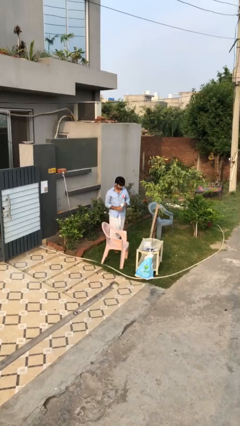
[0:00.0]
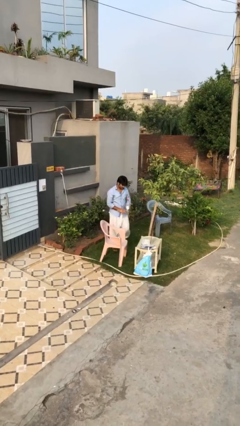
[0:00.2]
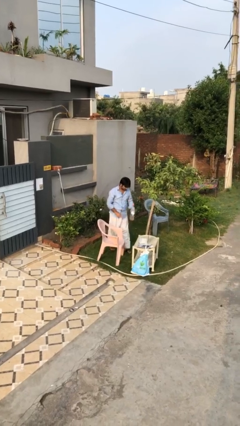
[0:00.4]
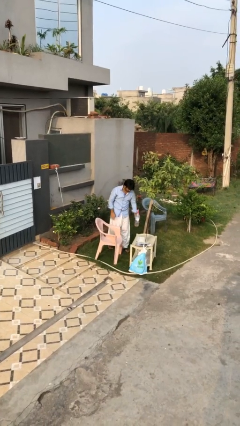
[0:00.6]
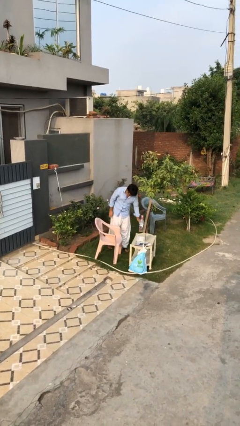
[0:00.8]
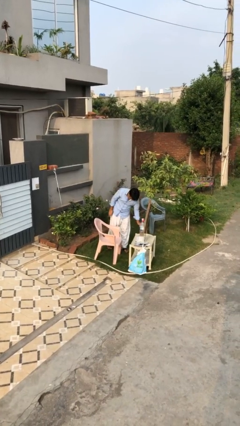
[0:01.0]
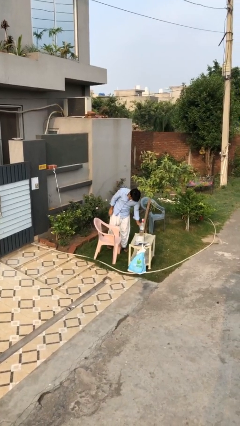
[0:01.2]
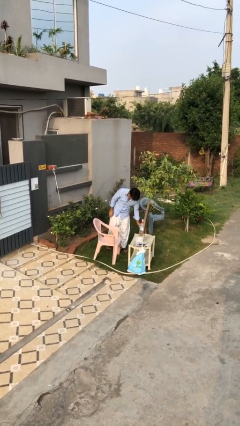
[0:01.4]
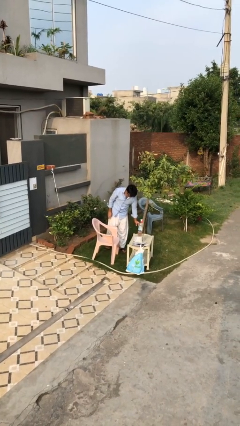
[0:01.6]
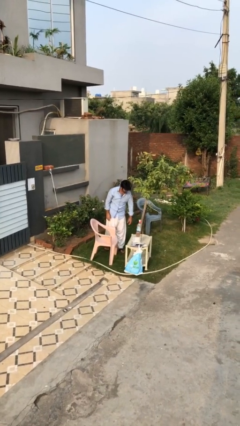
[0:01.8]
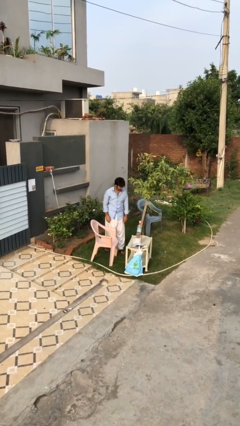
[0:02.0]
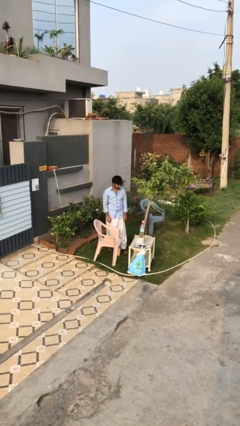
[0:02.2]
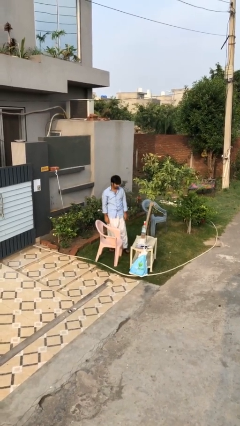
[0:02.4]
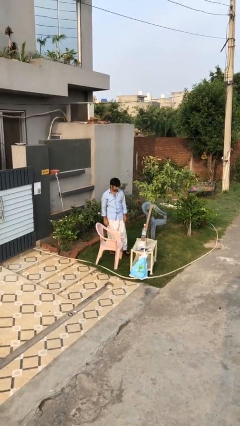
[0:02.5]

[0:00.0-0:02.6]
person puts down object on table

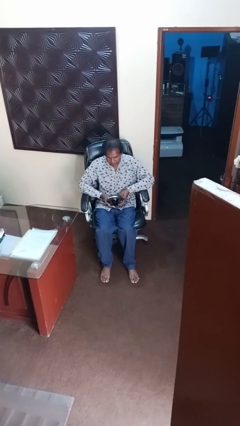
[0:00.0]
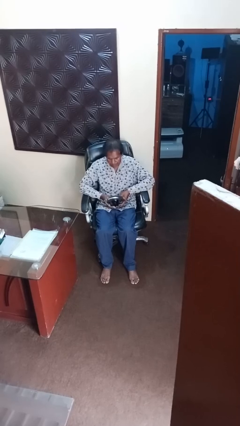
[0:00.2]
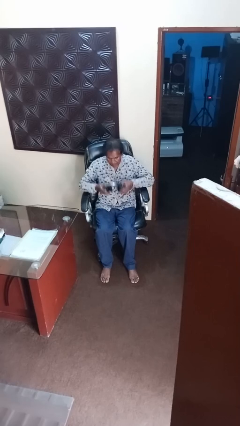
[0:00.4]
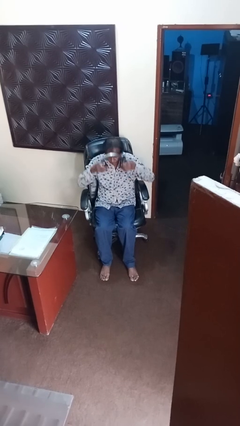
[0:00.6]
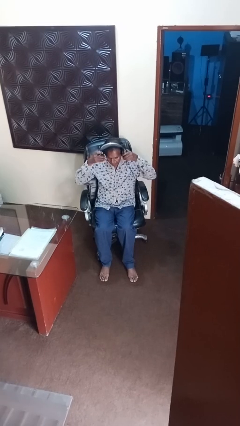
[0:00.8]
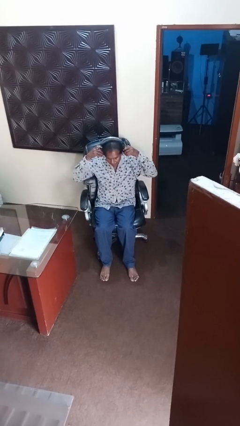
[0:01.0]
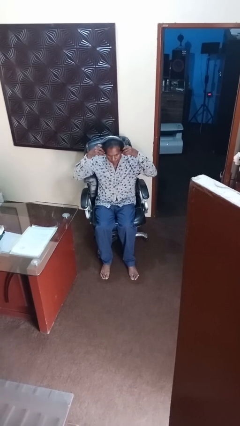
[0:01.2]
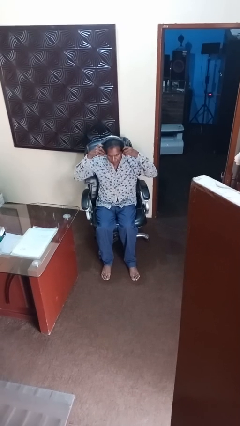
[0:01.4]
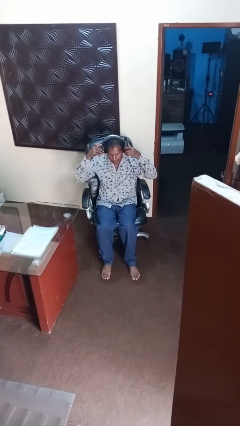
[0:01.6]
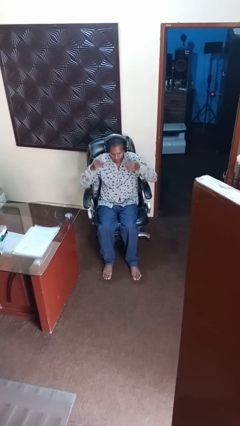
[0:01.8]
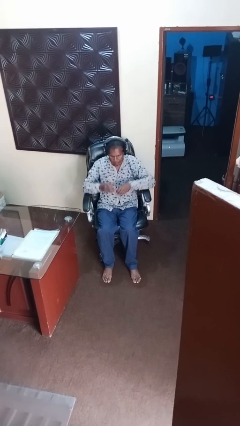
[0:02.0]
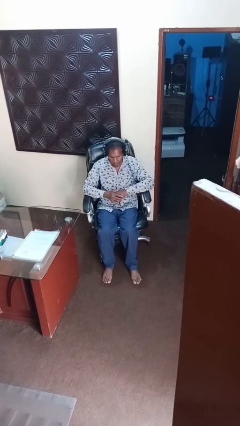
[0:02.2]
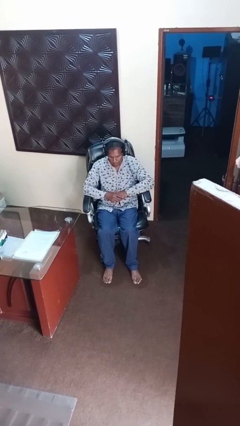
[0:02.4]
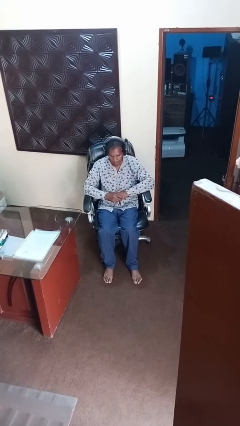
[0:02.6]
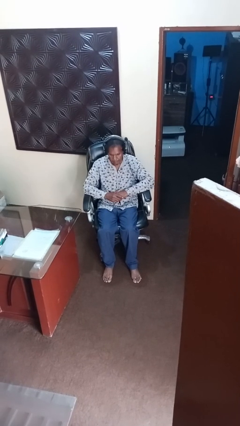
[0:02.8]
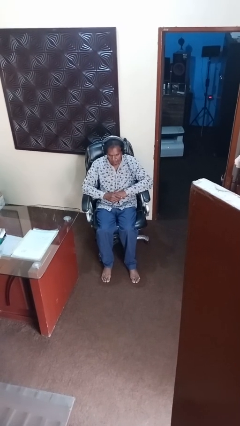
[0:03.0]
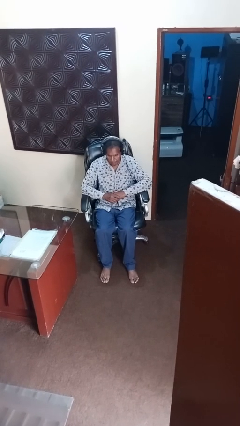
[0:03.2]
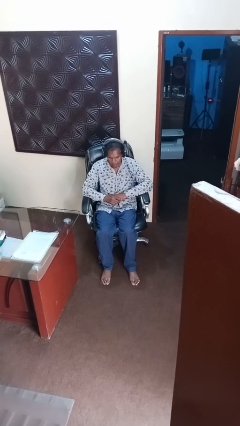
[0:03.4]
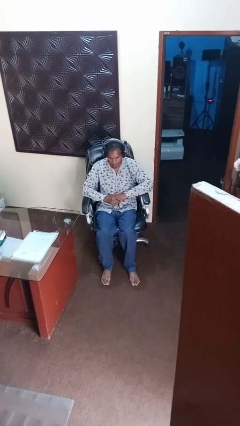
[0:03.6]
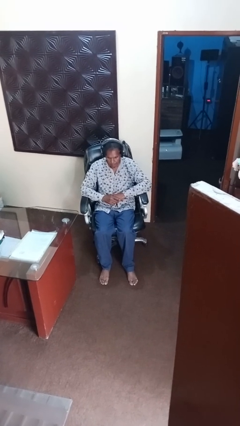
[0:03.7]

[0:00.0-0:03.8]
person puts on headphones

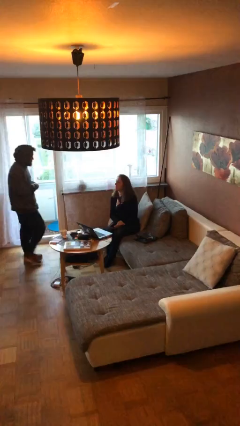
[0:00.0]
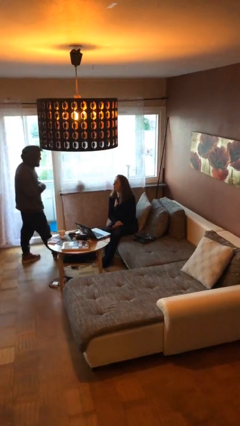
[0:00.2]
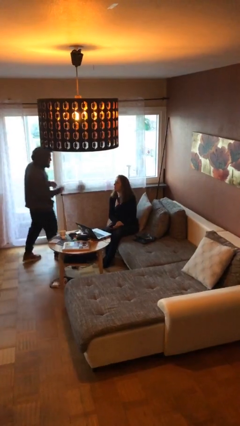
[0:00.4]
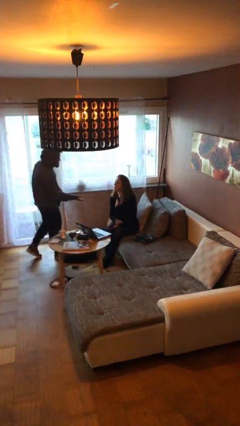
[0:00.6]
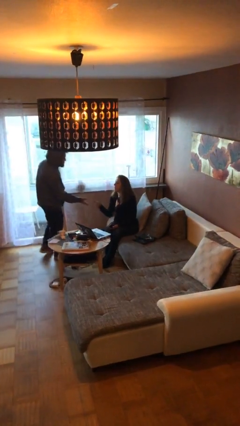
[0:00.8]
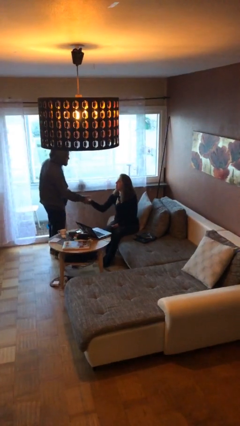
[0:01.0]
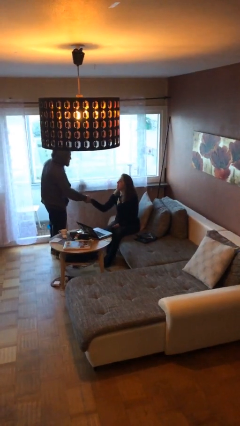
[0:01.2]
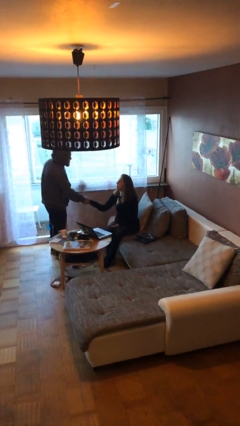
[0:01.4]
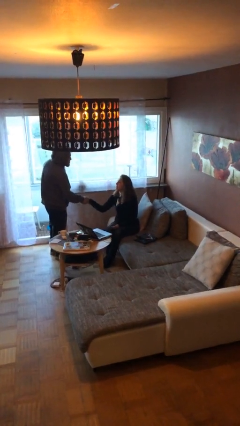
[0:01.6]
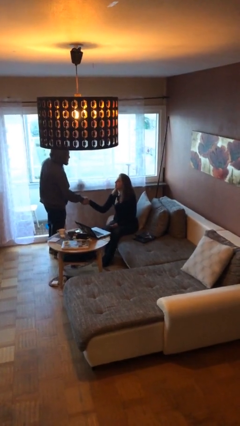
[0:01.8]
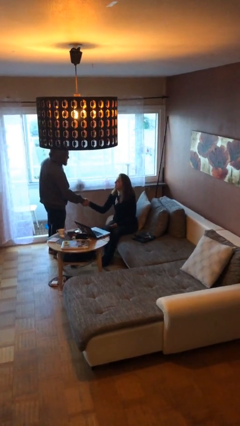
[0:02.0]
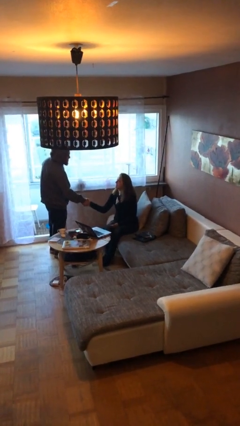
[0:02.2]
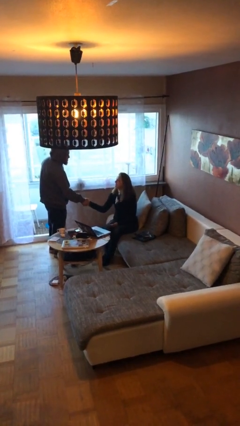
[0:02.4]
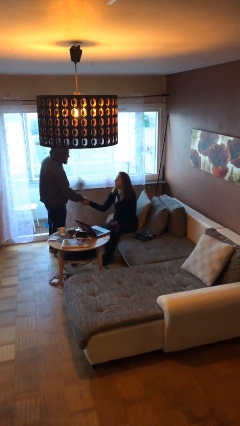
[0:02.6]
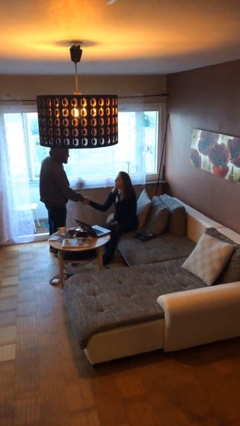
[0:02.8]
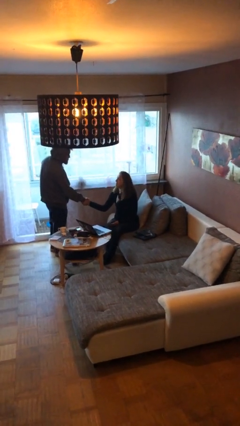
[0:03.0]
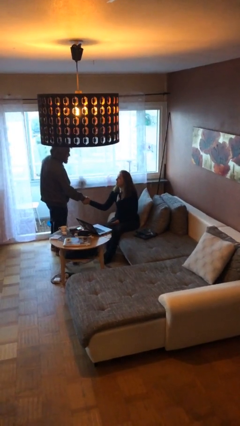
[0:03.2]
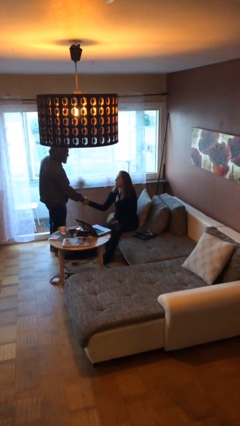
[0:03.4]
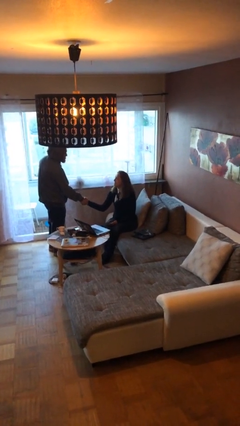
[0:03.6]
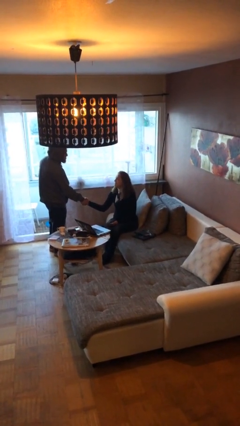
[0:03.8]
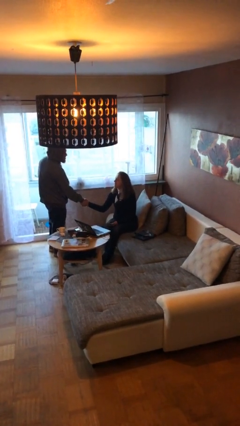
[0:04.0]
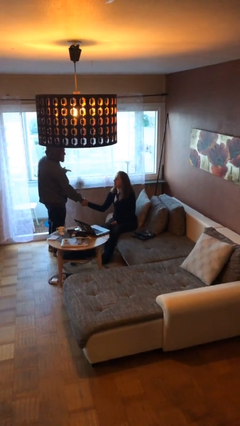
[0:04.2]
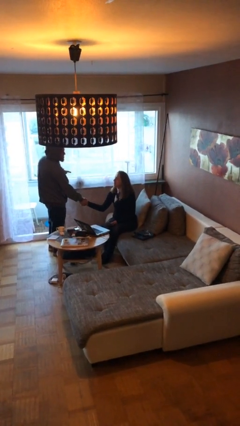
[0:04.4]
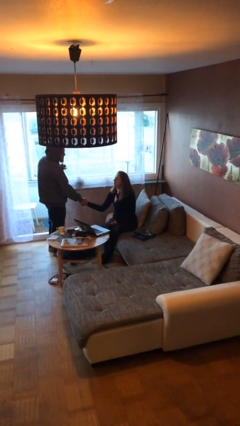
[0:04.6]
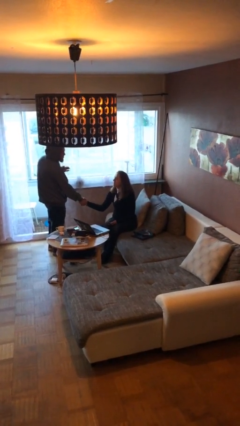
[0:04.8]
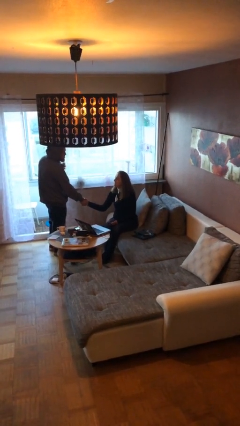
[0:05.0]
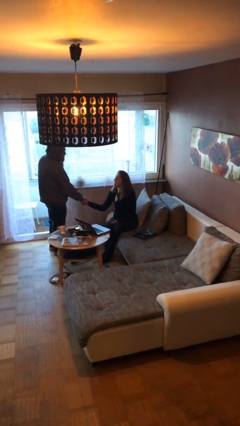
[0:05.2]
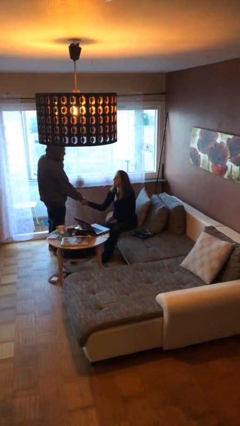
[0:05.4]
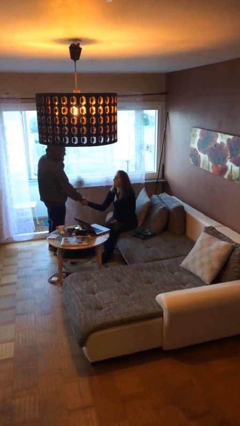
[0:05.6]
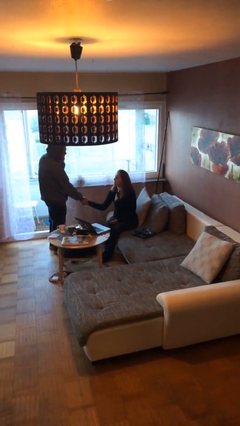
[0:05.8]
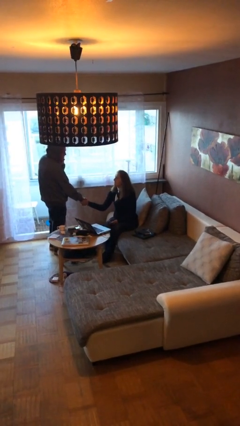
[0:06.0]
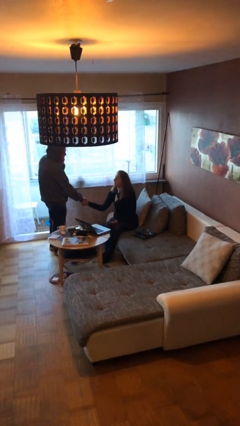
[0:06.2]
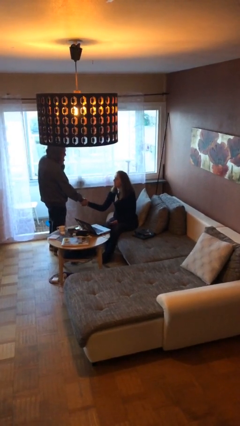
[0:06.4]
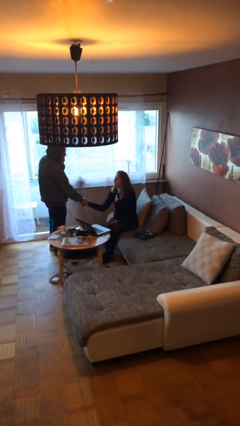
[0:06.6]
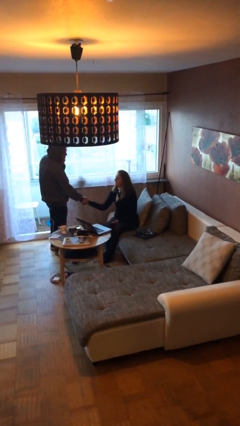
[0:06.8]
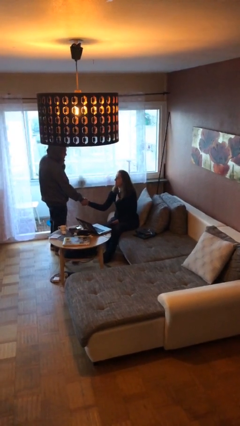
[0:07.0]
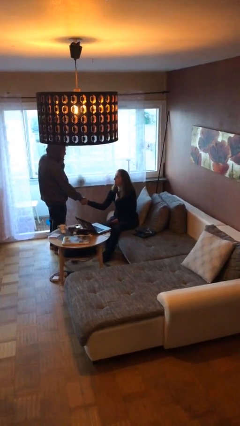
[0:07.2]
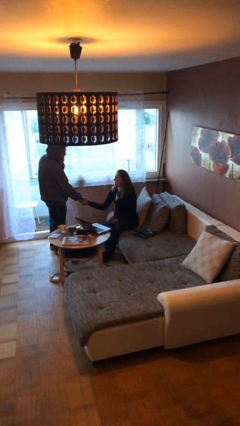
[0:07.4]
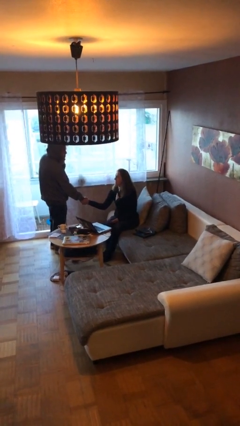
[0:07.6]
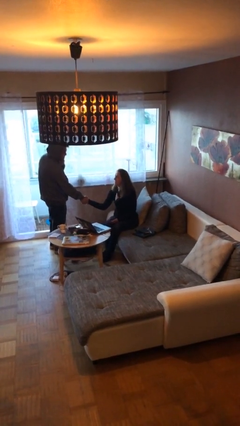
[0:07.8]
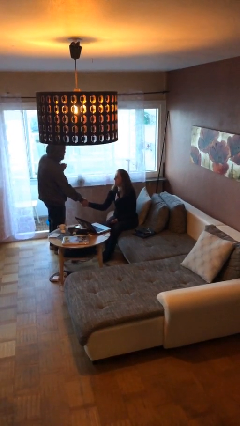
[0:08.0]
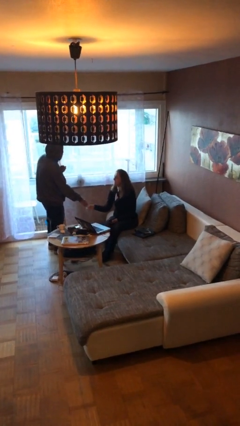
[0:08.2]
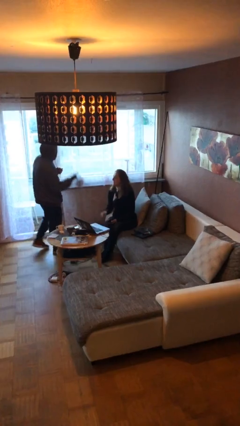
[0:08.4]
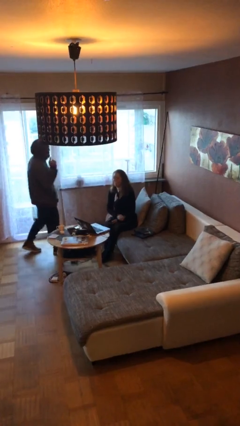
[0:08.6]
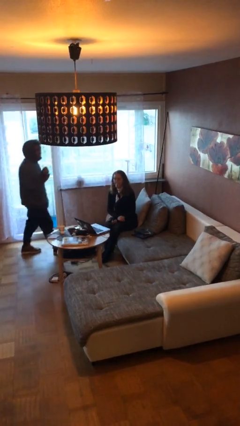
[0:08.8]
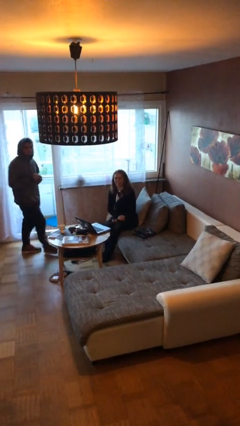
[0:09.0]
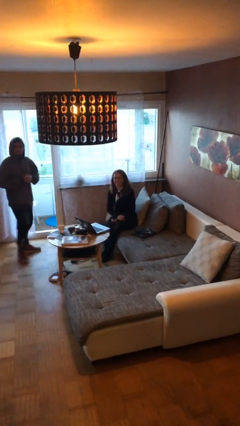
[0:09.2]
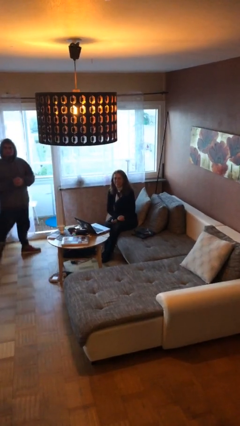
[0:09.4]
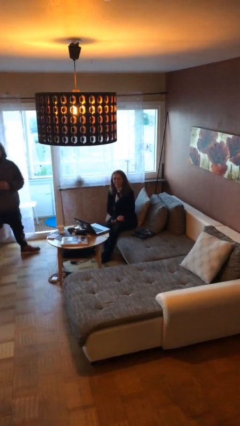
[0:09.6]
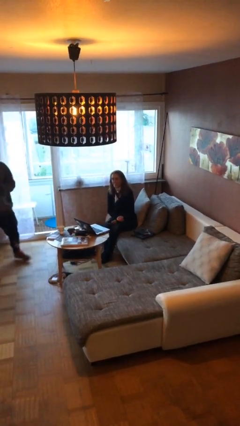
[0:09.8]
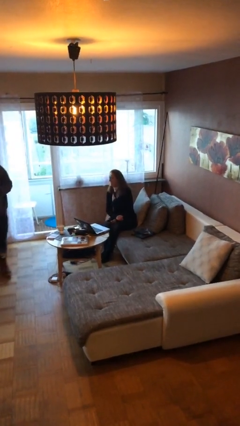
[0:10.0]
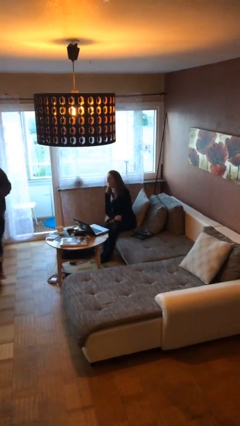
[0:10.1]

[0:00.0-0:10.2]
person shakes hand

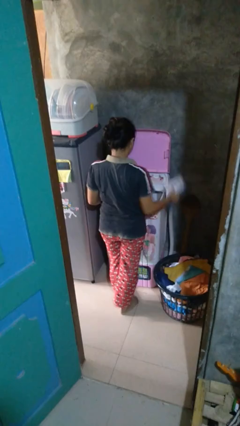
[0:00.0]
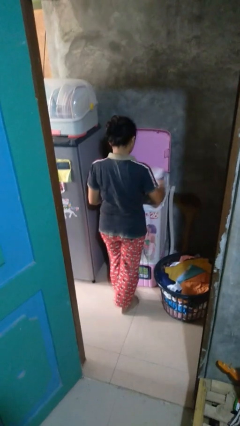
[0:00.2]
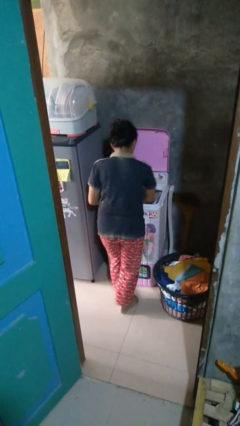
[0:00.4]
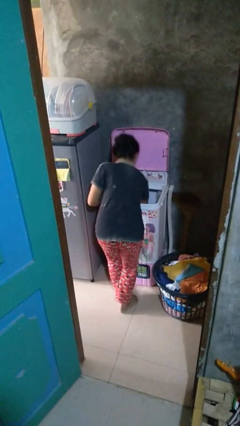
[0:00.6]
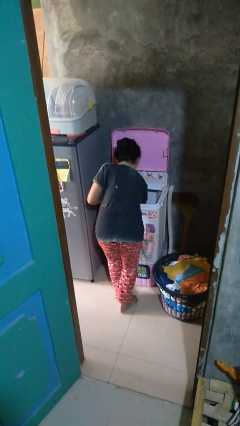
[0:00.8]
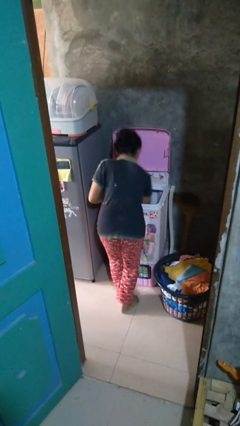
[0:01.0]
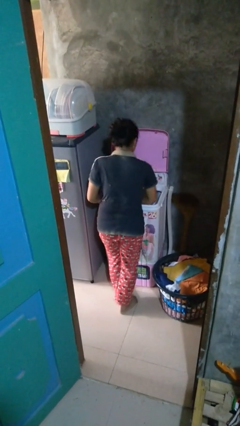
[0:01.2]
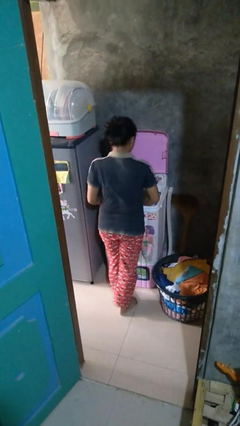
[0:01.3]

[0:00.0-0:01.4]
person loads clotheswasher
